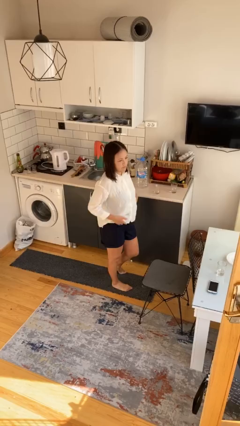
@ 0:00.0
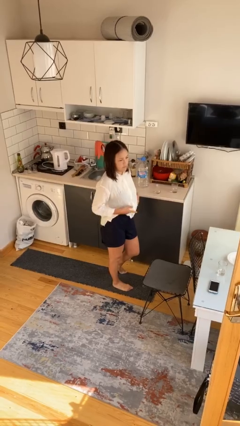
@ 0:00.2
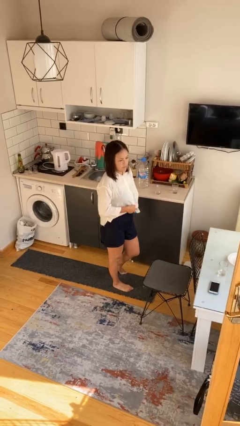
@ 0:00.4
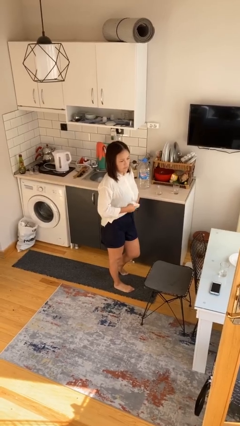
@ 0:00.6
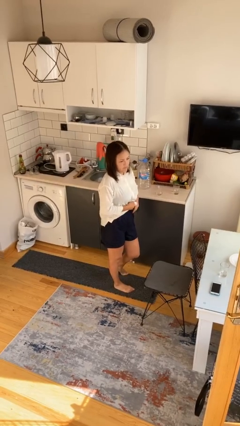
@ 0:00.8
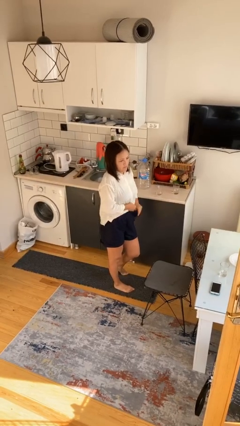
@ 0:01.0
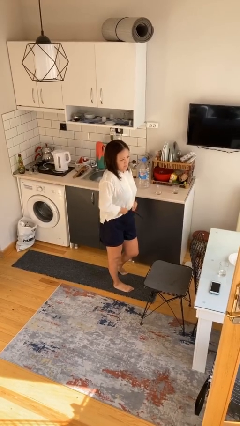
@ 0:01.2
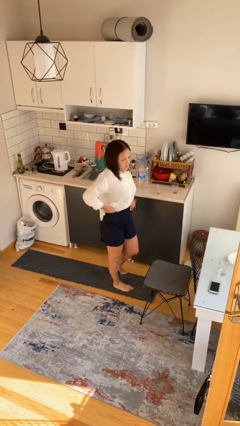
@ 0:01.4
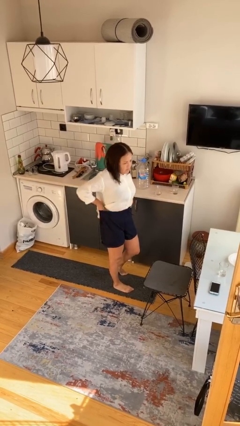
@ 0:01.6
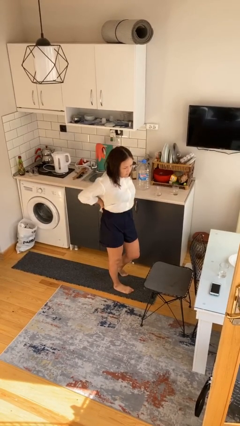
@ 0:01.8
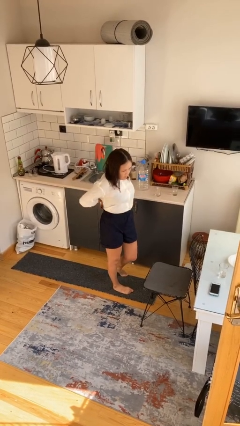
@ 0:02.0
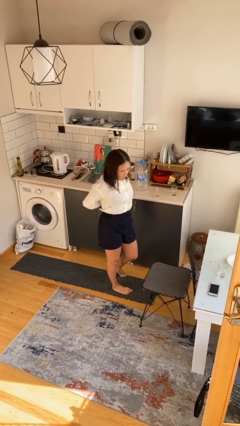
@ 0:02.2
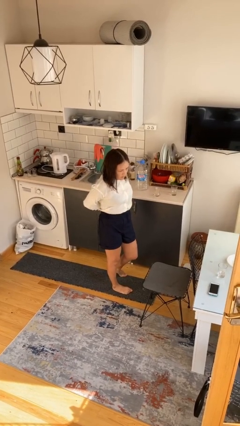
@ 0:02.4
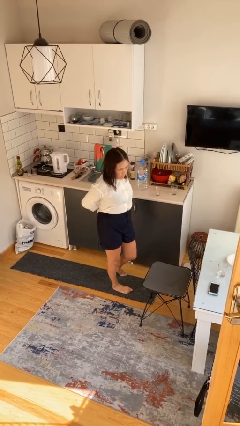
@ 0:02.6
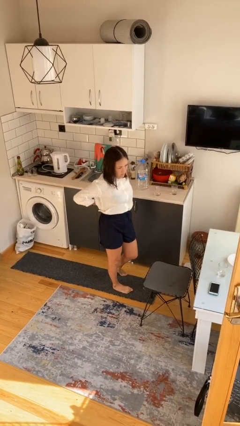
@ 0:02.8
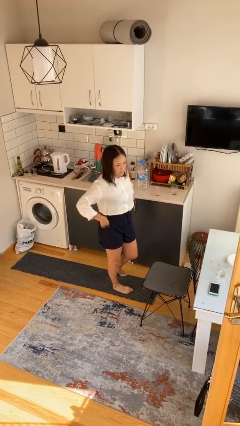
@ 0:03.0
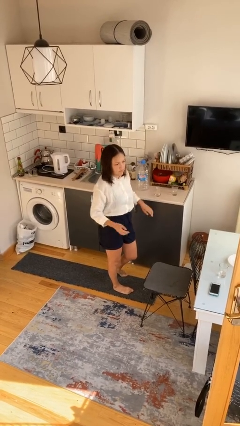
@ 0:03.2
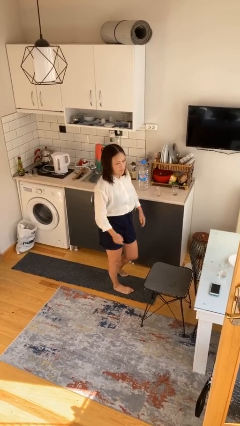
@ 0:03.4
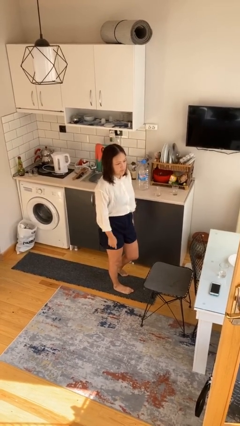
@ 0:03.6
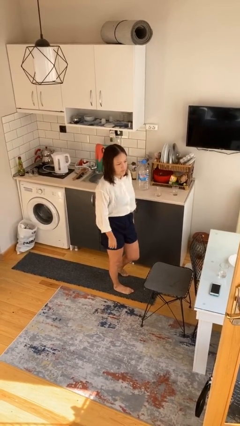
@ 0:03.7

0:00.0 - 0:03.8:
person tucks in shirt

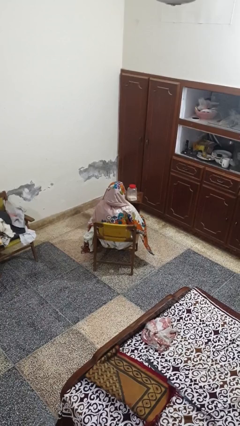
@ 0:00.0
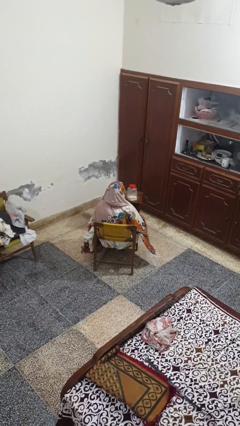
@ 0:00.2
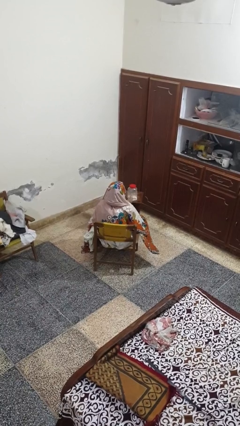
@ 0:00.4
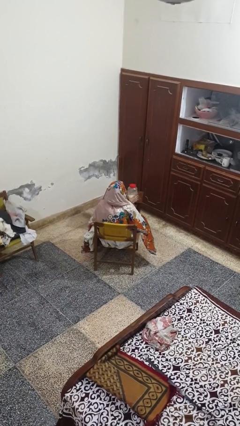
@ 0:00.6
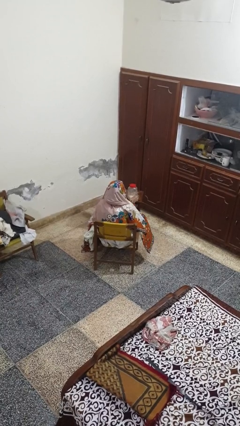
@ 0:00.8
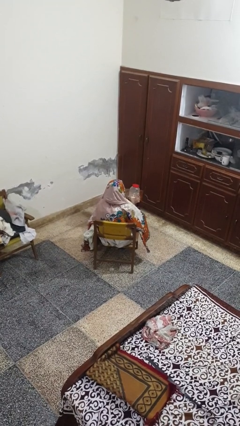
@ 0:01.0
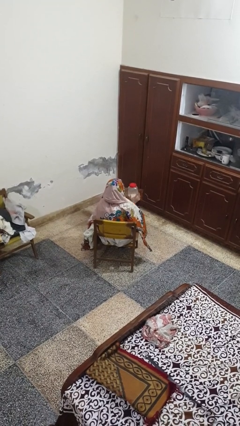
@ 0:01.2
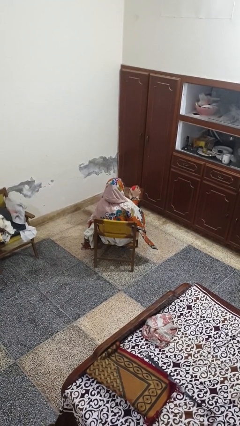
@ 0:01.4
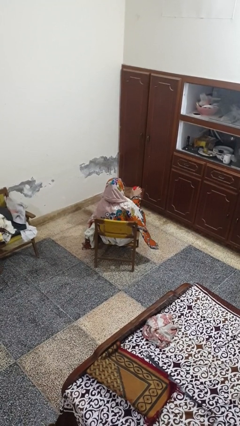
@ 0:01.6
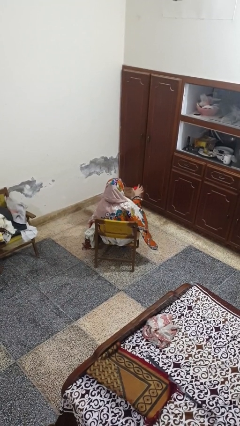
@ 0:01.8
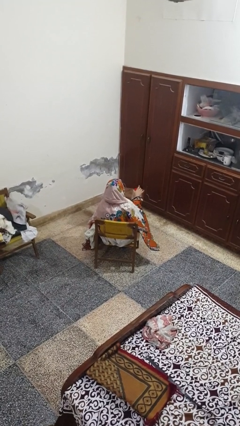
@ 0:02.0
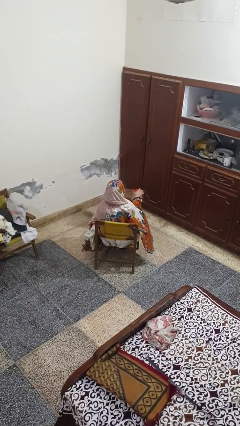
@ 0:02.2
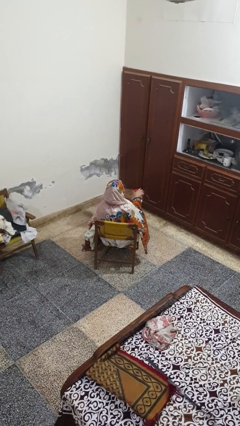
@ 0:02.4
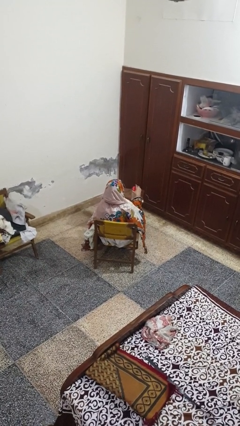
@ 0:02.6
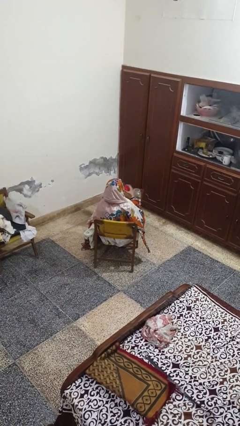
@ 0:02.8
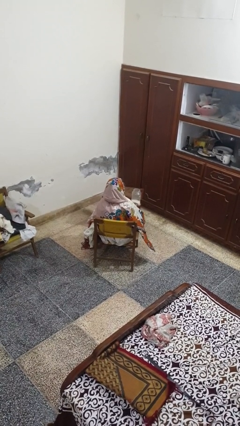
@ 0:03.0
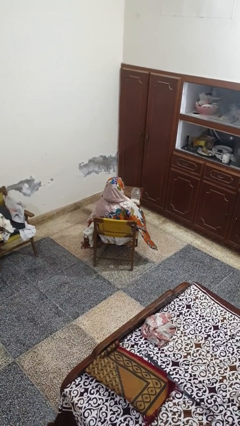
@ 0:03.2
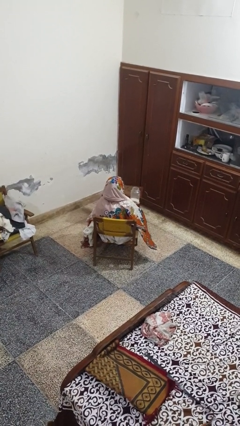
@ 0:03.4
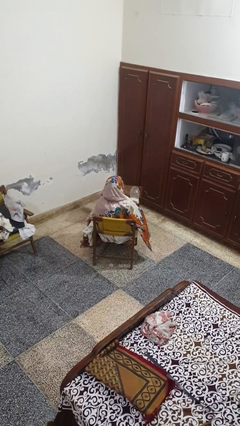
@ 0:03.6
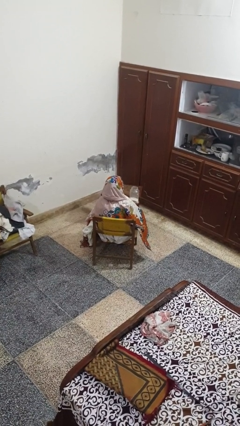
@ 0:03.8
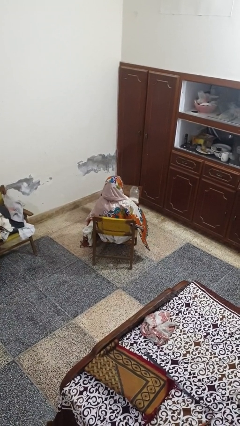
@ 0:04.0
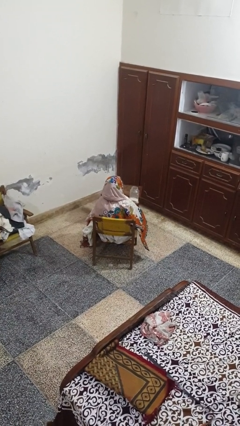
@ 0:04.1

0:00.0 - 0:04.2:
person opens jar

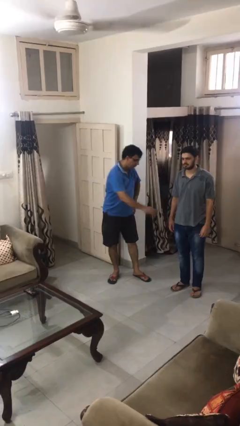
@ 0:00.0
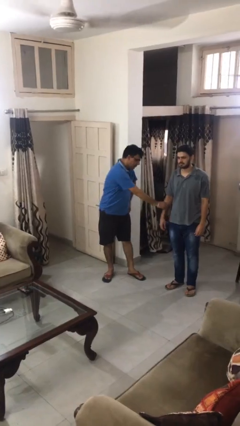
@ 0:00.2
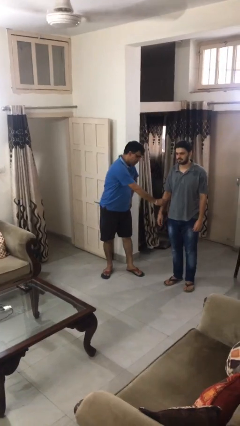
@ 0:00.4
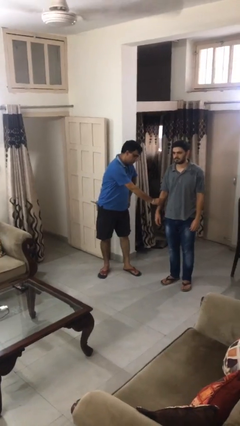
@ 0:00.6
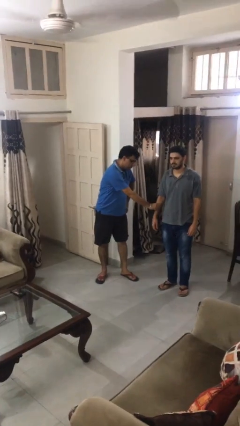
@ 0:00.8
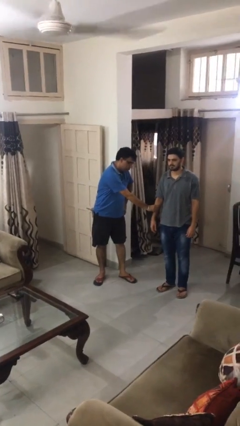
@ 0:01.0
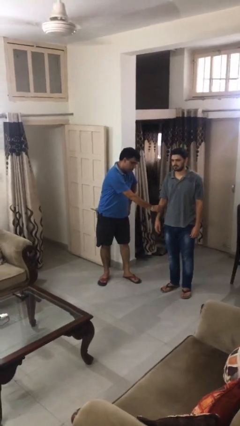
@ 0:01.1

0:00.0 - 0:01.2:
person grabs person by forearm

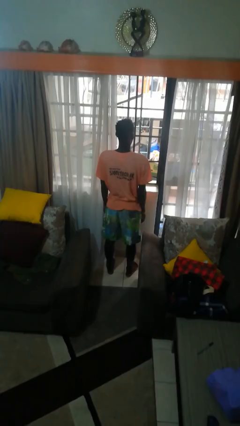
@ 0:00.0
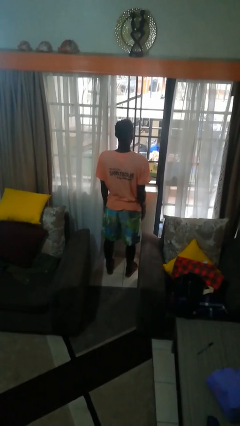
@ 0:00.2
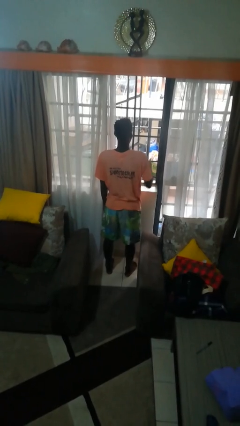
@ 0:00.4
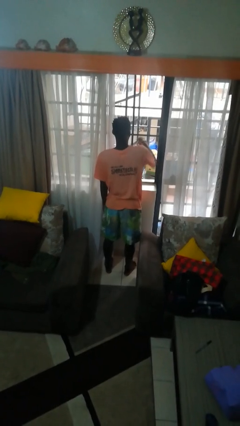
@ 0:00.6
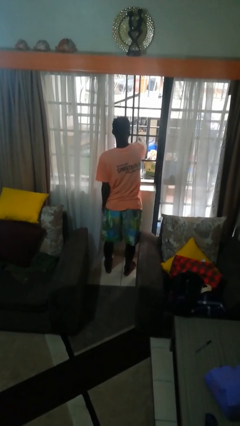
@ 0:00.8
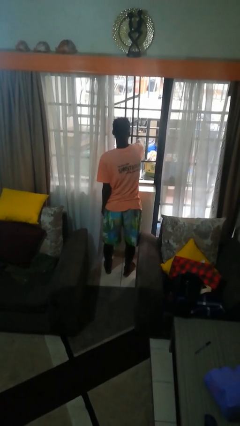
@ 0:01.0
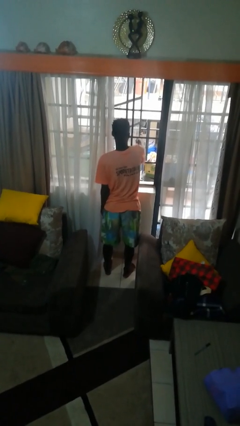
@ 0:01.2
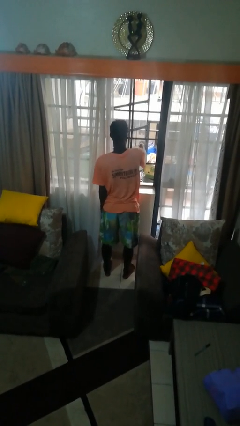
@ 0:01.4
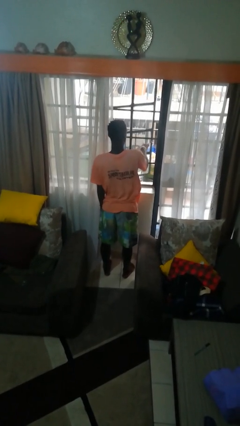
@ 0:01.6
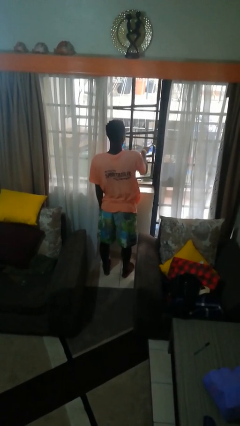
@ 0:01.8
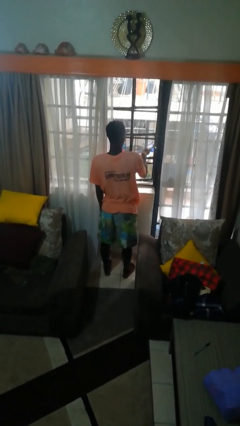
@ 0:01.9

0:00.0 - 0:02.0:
person closes home window

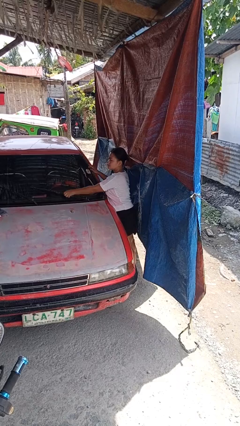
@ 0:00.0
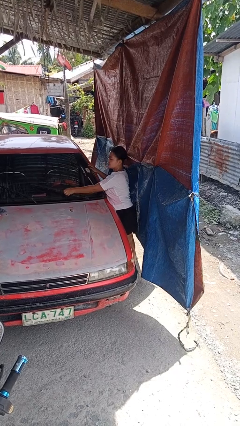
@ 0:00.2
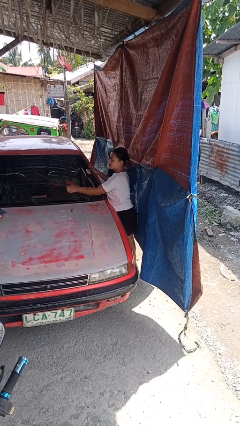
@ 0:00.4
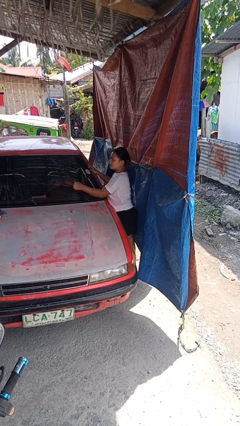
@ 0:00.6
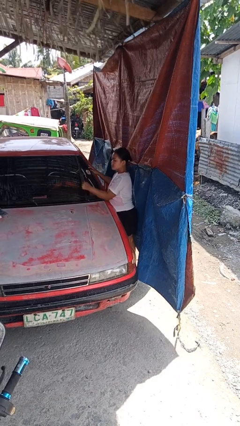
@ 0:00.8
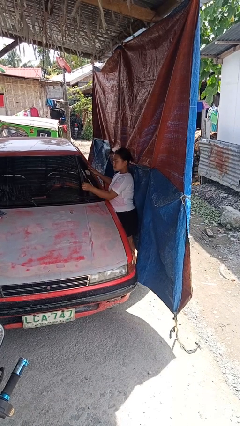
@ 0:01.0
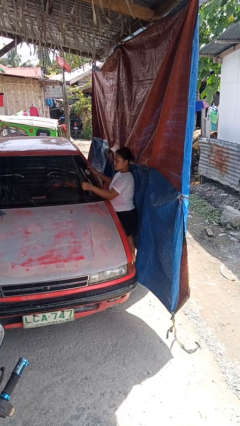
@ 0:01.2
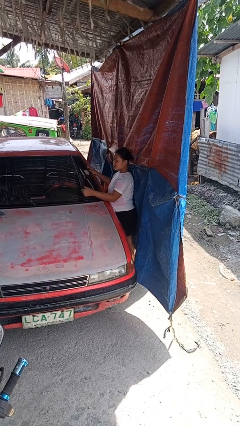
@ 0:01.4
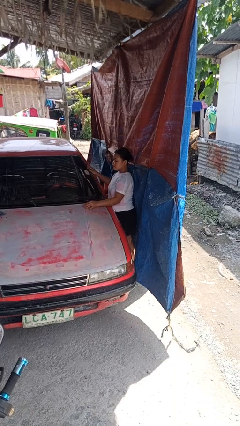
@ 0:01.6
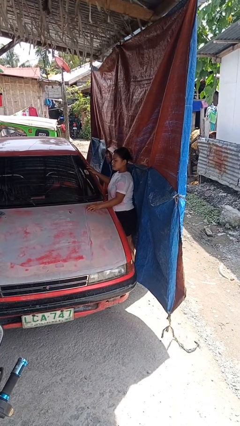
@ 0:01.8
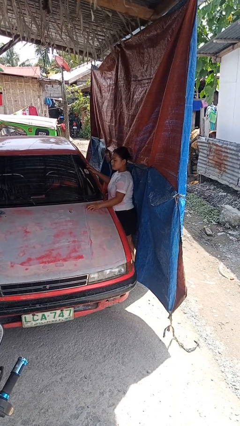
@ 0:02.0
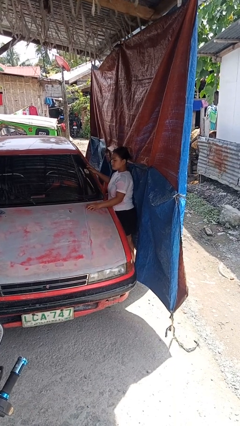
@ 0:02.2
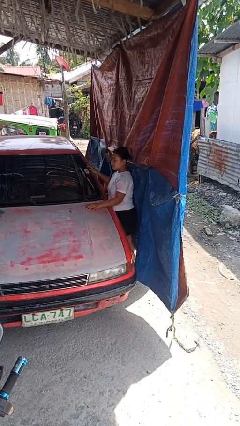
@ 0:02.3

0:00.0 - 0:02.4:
person flips up car wipers

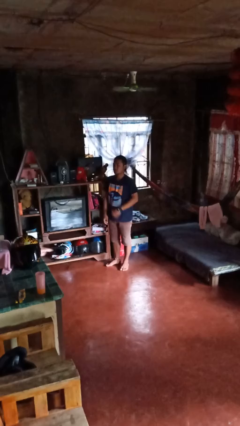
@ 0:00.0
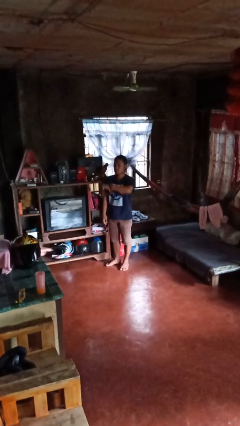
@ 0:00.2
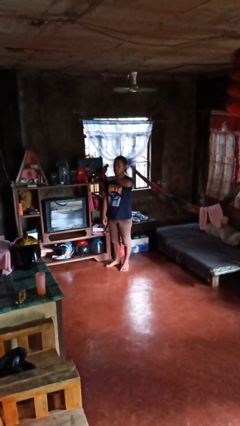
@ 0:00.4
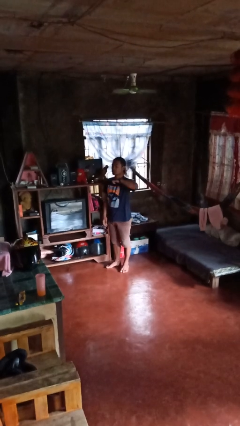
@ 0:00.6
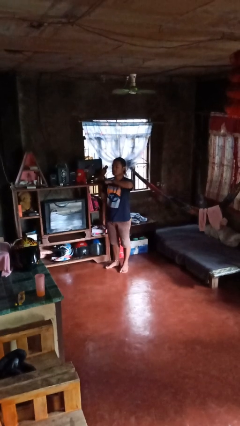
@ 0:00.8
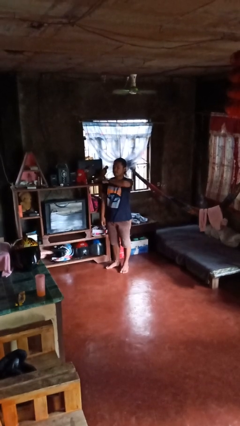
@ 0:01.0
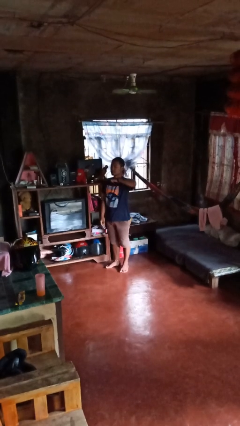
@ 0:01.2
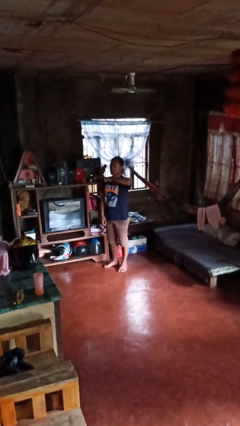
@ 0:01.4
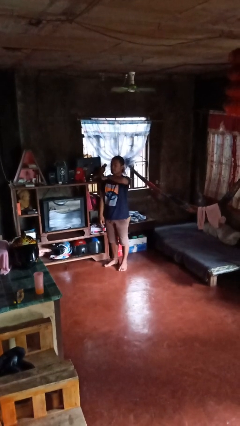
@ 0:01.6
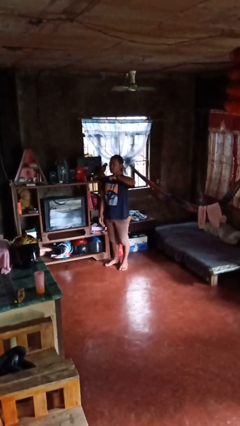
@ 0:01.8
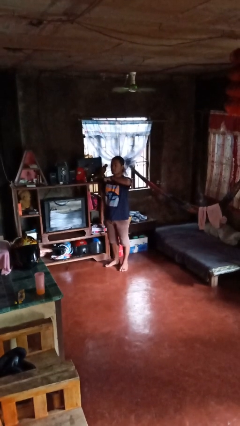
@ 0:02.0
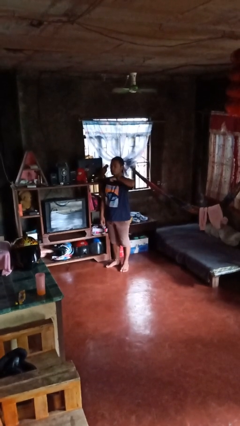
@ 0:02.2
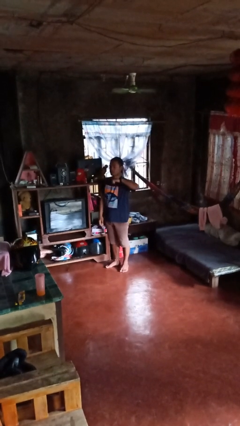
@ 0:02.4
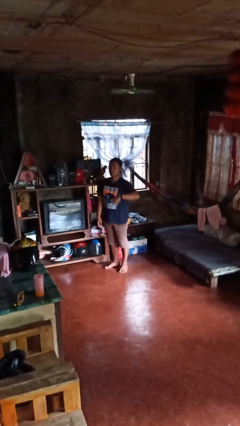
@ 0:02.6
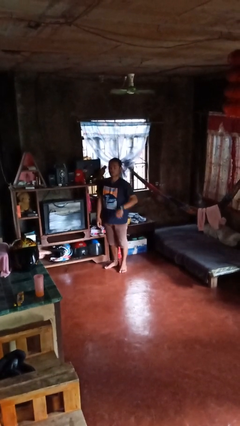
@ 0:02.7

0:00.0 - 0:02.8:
person gestures cut

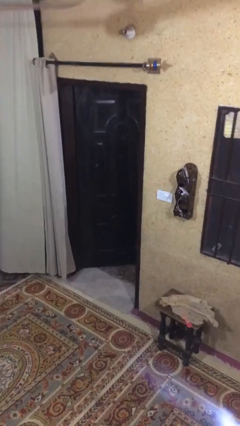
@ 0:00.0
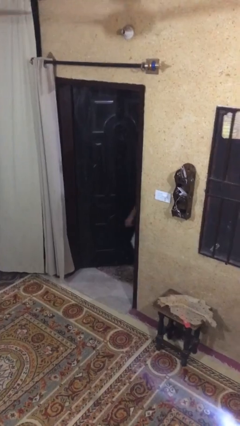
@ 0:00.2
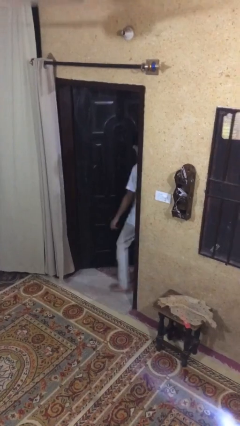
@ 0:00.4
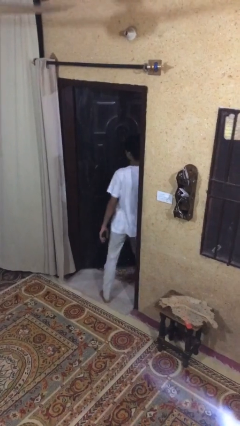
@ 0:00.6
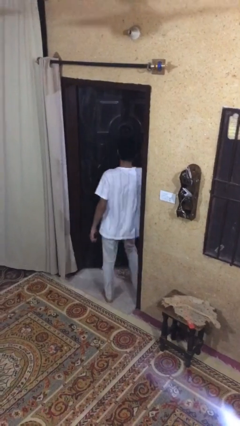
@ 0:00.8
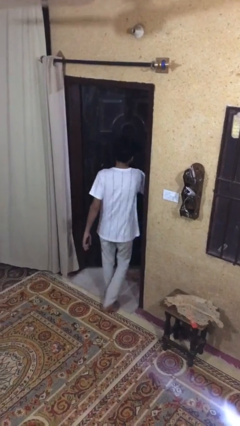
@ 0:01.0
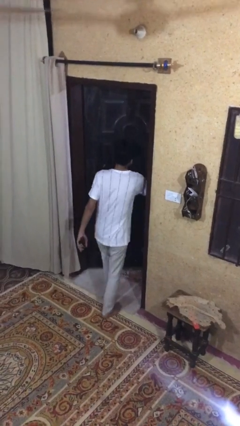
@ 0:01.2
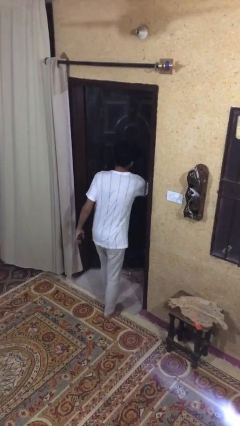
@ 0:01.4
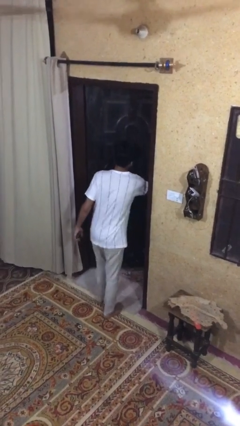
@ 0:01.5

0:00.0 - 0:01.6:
person enters scene through structure
